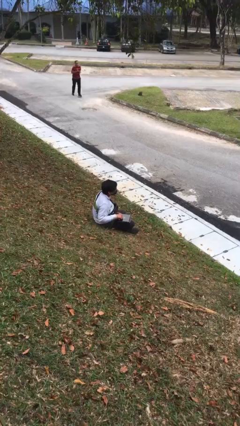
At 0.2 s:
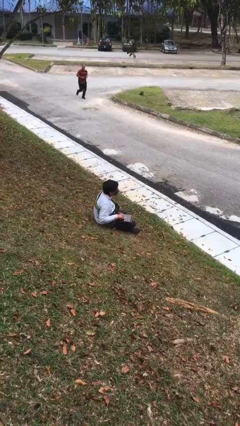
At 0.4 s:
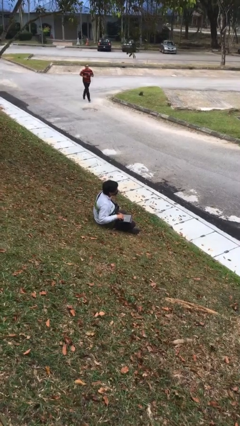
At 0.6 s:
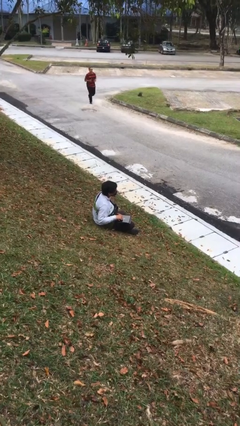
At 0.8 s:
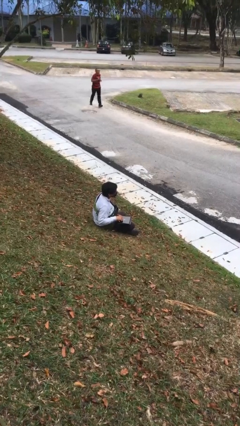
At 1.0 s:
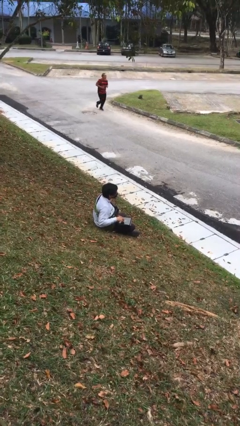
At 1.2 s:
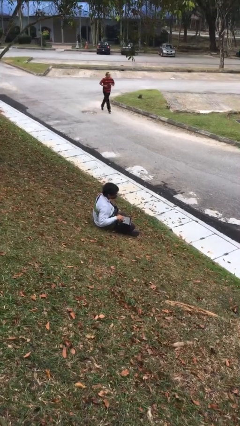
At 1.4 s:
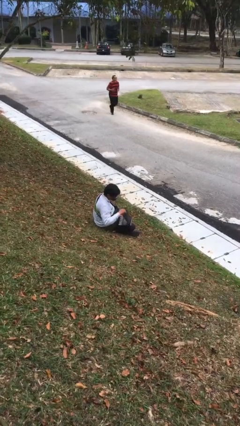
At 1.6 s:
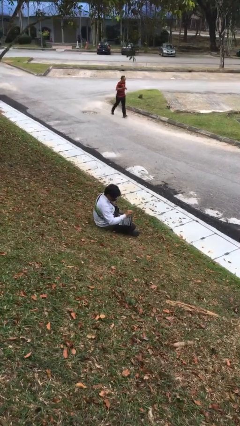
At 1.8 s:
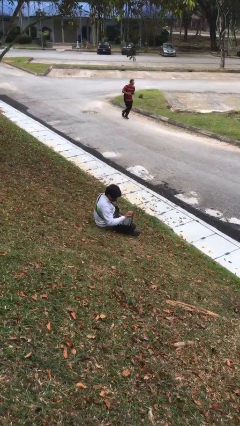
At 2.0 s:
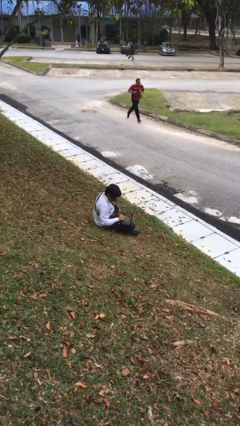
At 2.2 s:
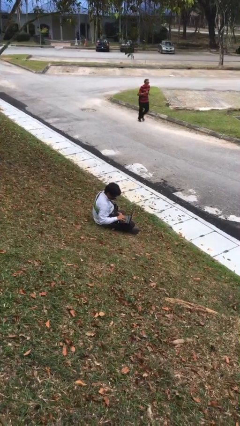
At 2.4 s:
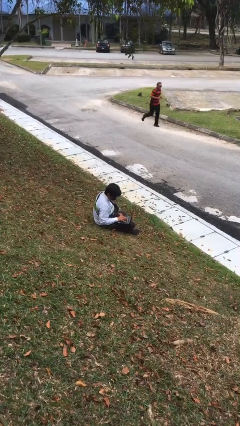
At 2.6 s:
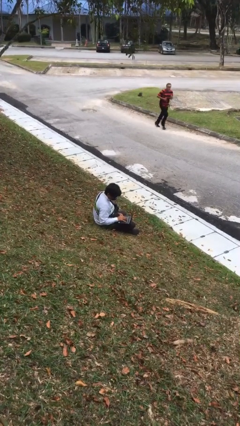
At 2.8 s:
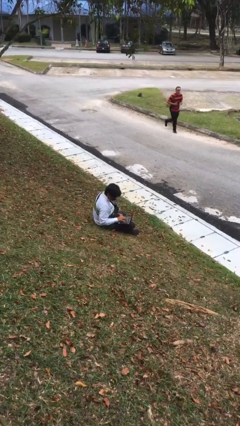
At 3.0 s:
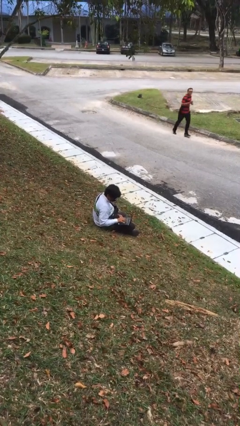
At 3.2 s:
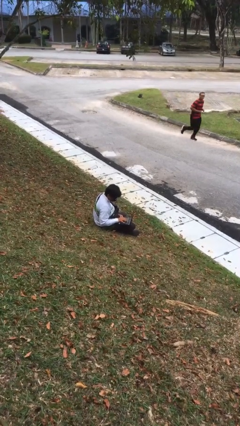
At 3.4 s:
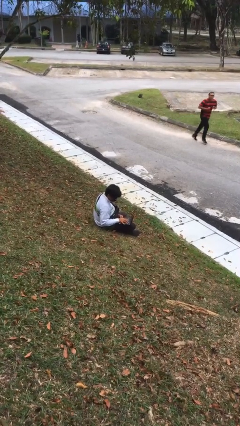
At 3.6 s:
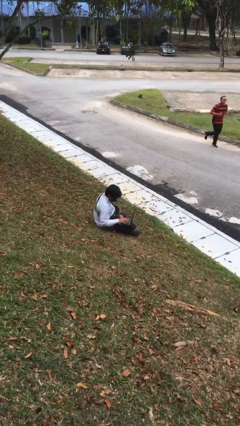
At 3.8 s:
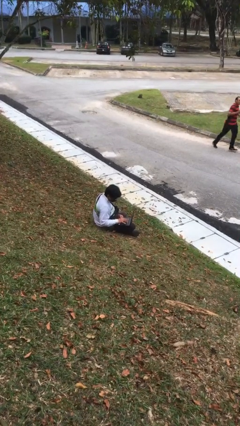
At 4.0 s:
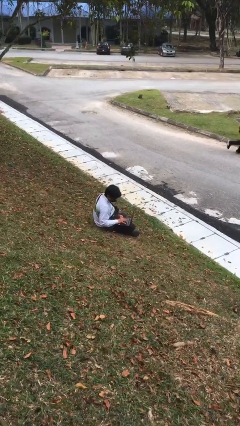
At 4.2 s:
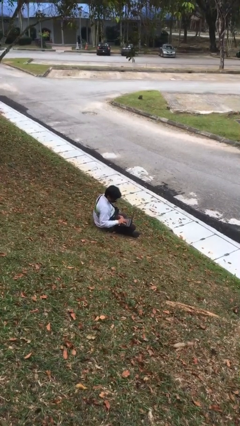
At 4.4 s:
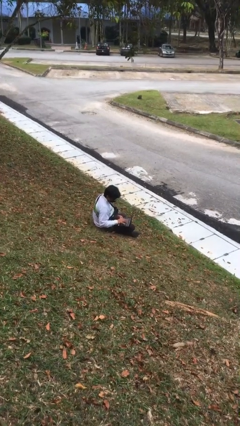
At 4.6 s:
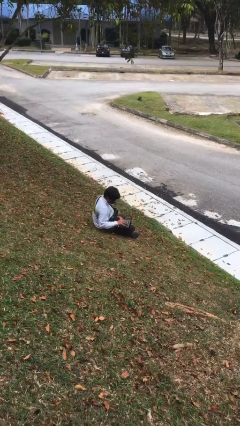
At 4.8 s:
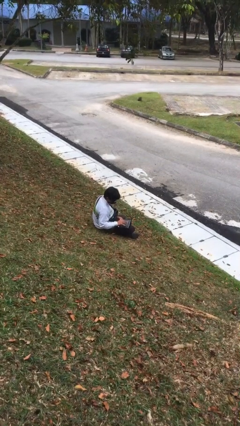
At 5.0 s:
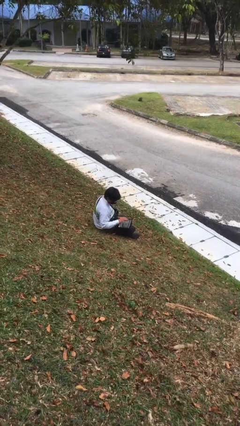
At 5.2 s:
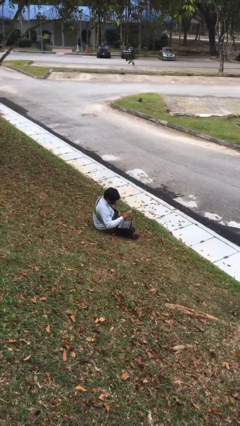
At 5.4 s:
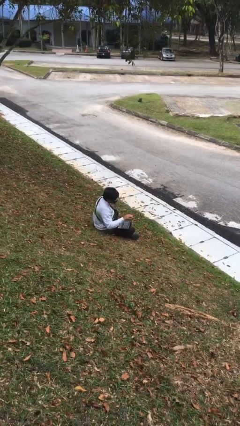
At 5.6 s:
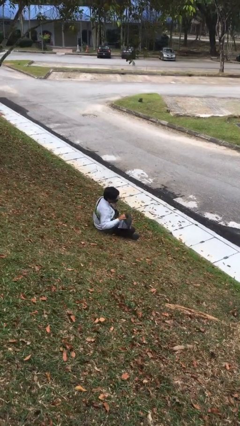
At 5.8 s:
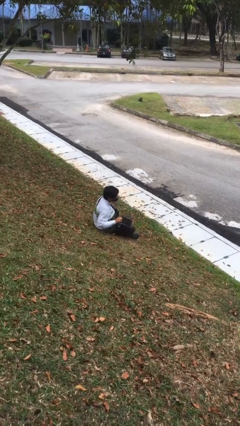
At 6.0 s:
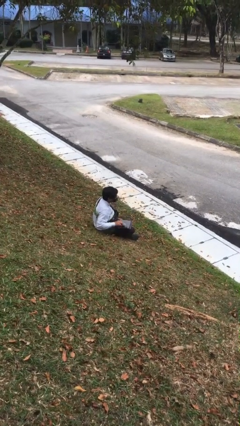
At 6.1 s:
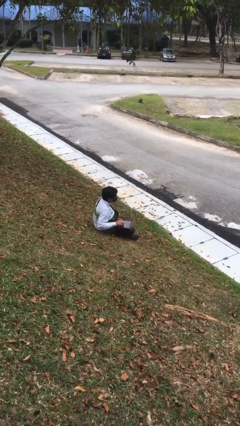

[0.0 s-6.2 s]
person interacts with laptop

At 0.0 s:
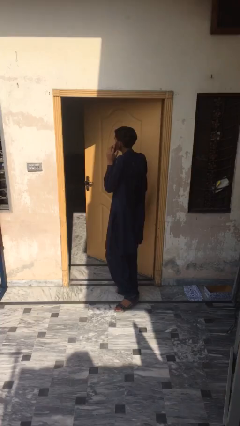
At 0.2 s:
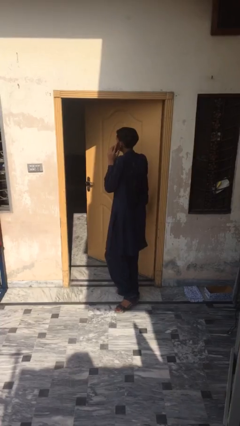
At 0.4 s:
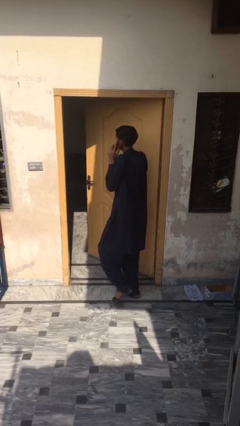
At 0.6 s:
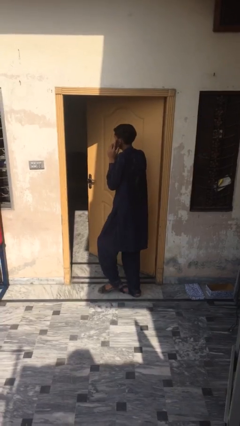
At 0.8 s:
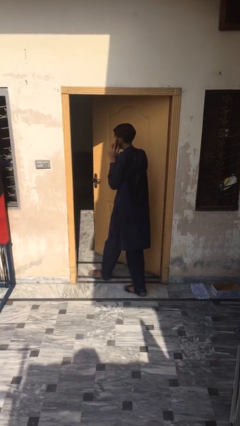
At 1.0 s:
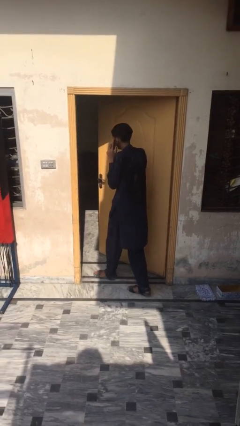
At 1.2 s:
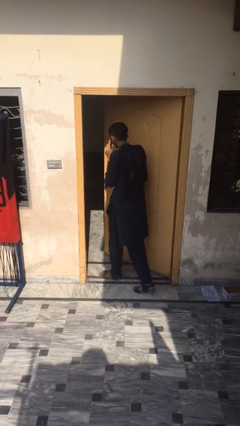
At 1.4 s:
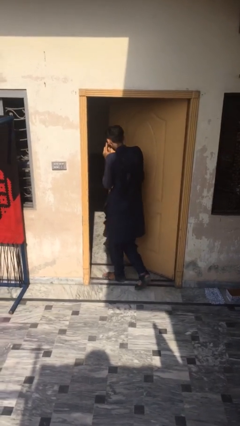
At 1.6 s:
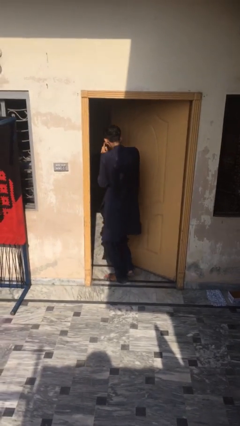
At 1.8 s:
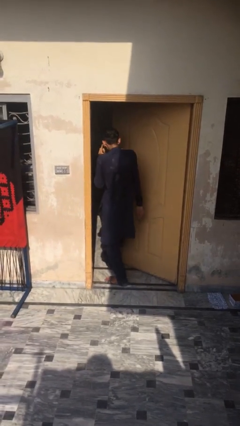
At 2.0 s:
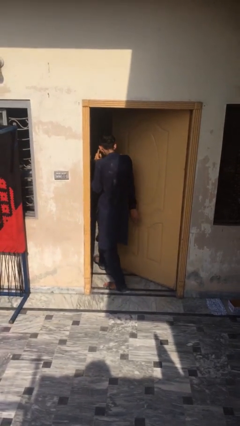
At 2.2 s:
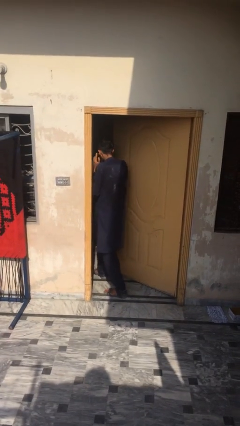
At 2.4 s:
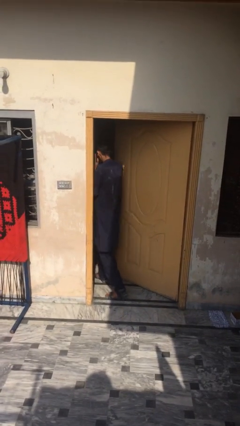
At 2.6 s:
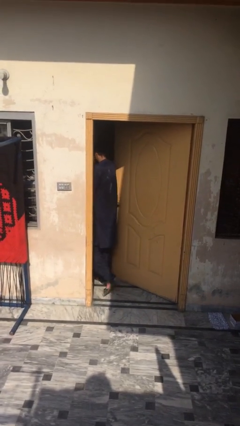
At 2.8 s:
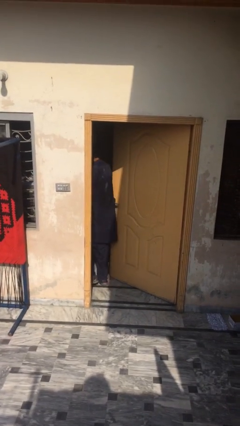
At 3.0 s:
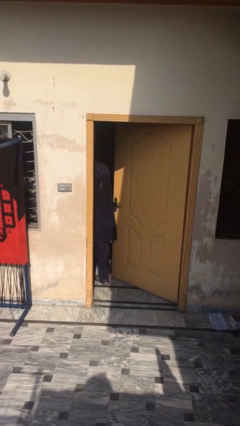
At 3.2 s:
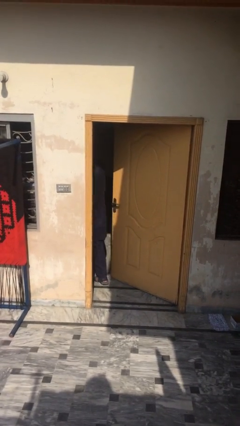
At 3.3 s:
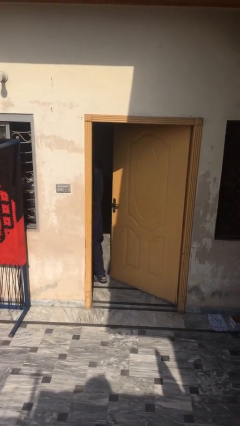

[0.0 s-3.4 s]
person exits scene through structure

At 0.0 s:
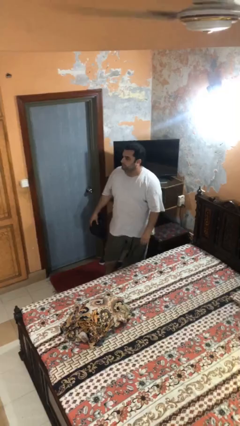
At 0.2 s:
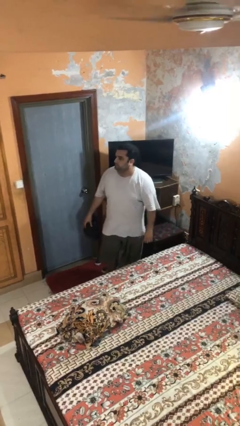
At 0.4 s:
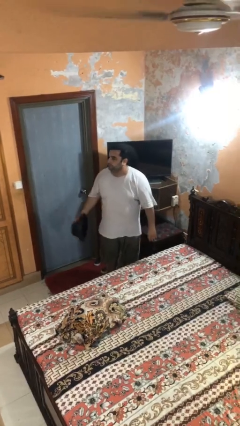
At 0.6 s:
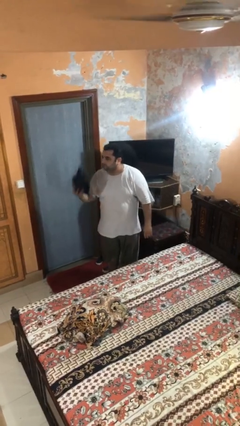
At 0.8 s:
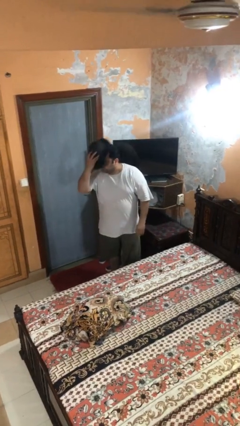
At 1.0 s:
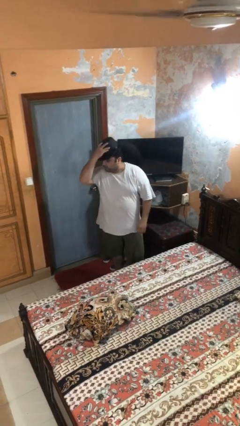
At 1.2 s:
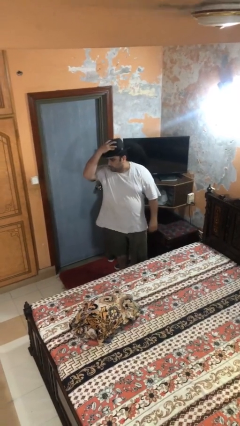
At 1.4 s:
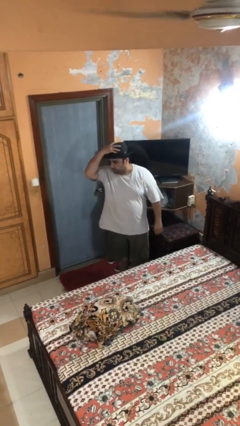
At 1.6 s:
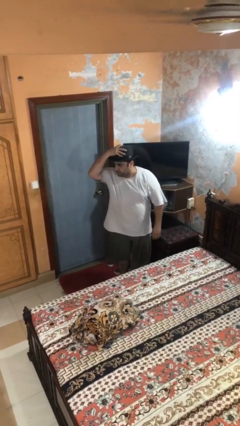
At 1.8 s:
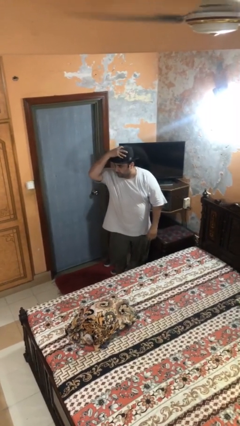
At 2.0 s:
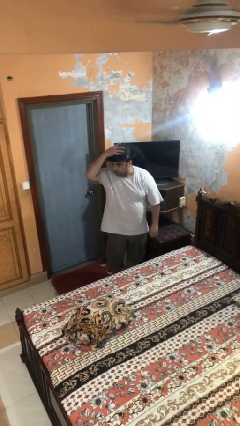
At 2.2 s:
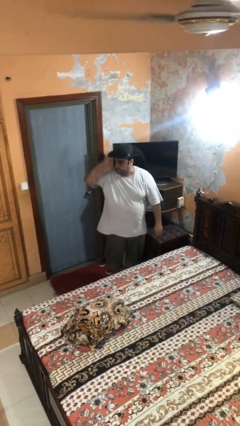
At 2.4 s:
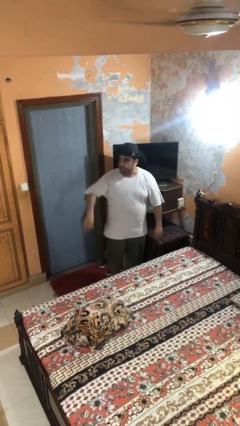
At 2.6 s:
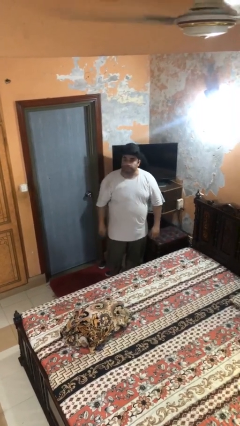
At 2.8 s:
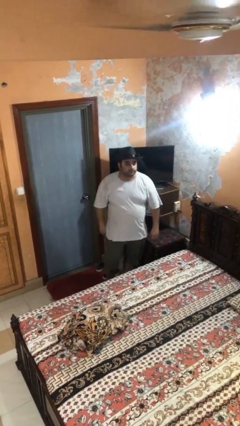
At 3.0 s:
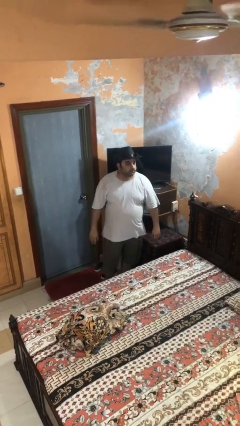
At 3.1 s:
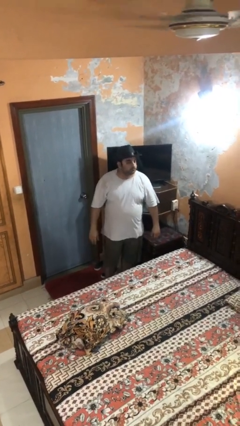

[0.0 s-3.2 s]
person puts on hat

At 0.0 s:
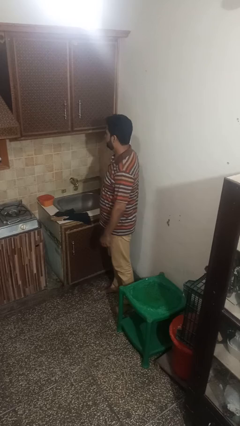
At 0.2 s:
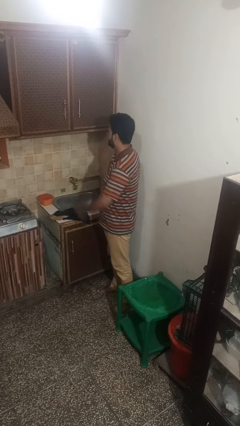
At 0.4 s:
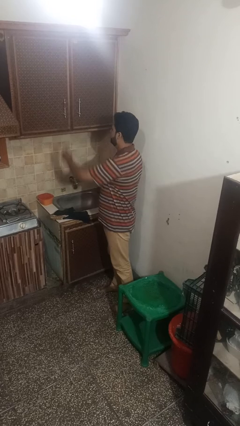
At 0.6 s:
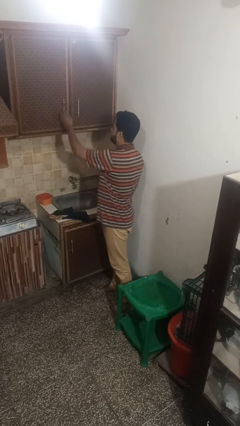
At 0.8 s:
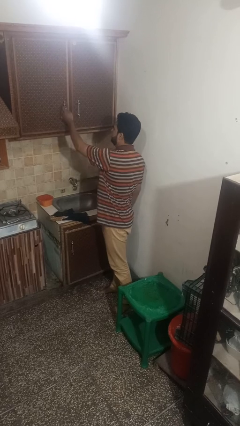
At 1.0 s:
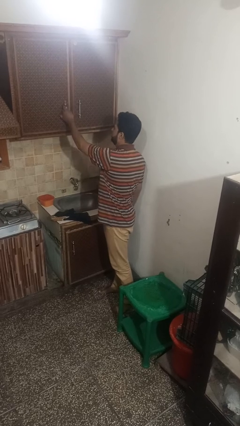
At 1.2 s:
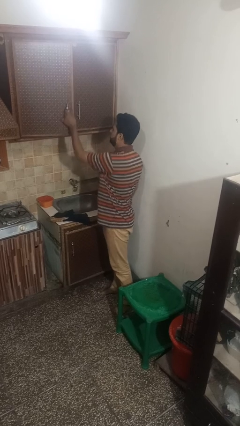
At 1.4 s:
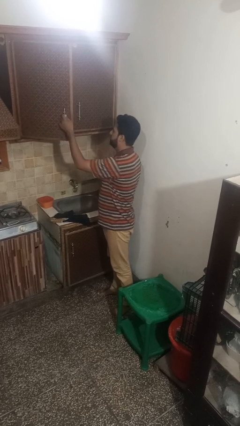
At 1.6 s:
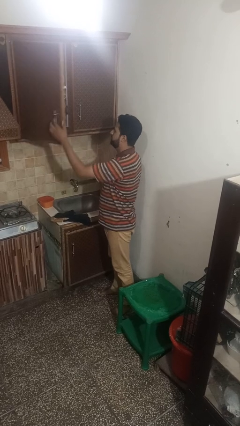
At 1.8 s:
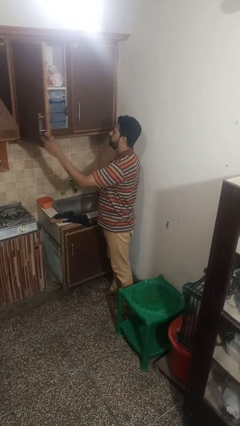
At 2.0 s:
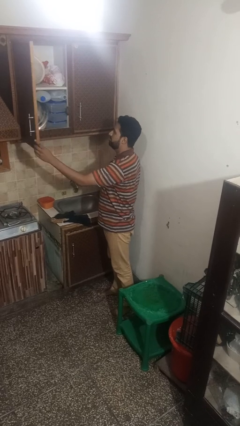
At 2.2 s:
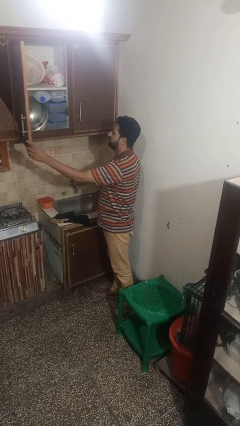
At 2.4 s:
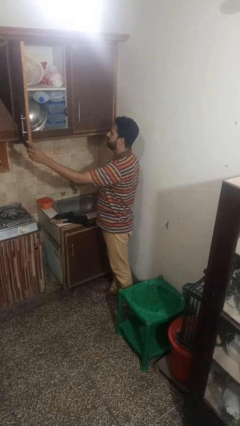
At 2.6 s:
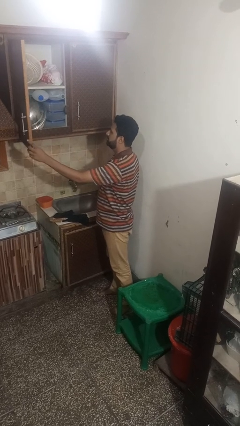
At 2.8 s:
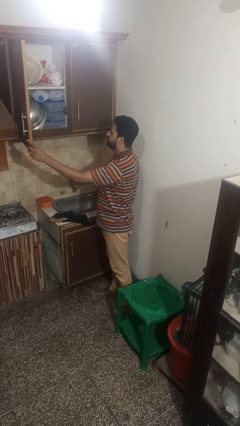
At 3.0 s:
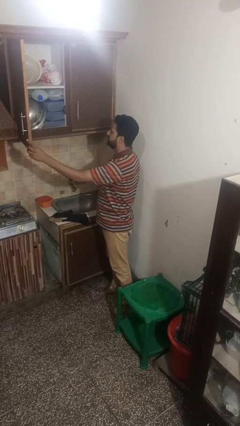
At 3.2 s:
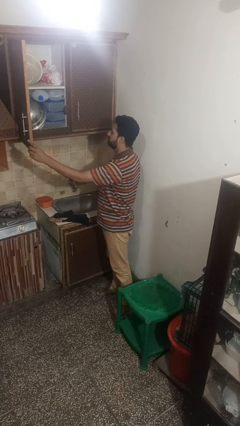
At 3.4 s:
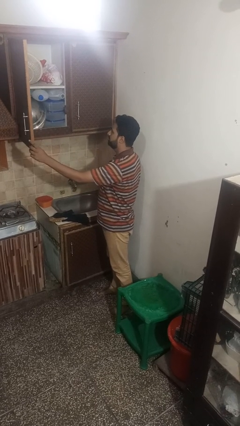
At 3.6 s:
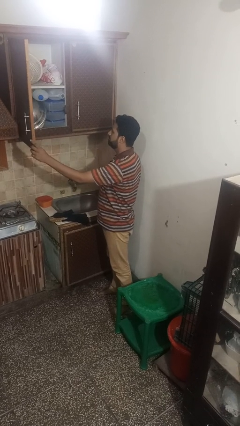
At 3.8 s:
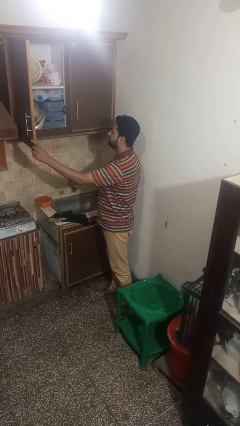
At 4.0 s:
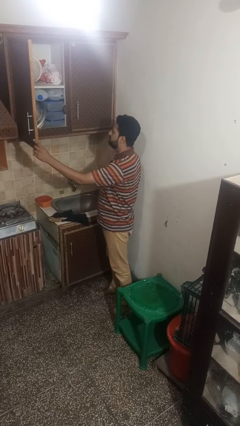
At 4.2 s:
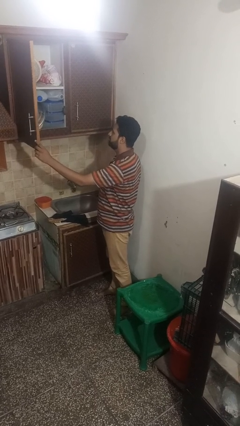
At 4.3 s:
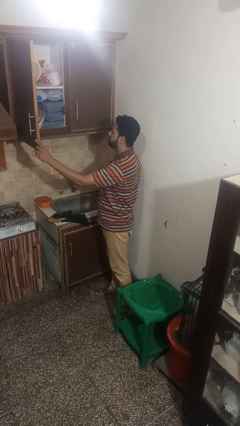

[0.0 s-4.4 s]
person opens cabinet

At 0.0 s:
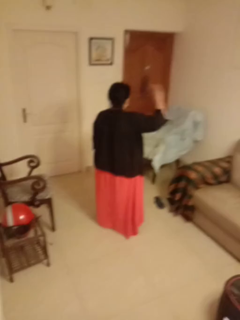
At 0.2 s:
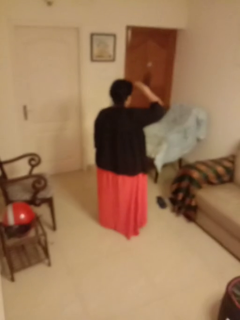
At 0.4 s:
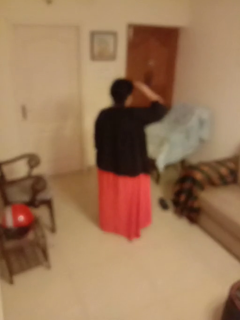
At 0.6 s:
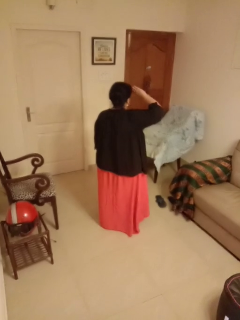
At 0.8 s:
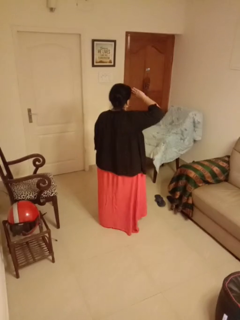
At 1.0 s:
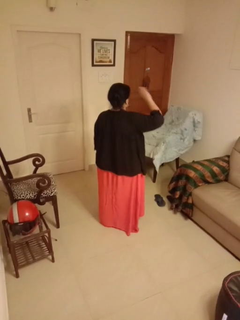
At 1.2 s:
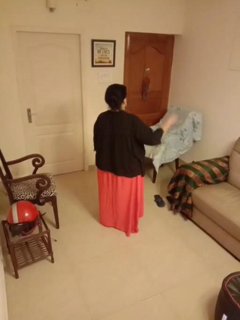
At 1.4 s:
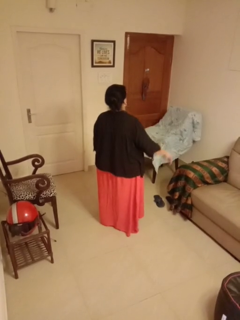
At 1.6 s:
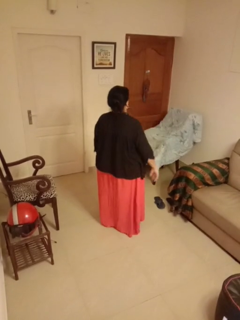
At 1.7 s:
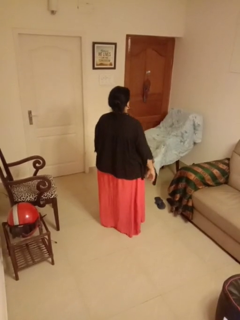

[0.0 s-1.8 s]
person salutes
